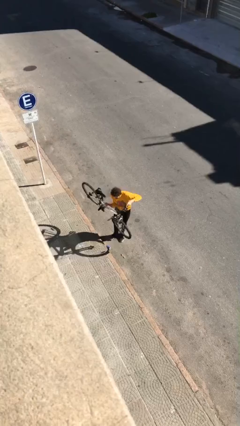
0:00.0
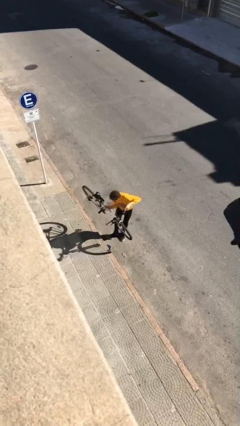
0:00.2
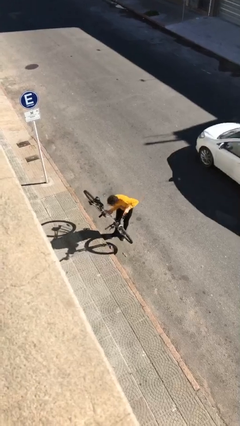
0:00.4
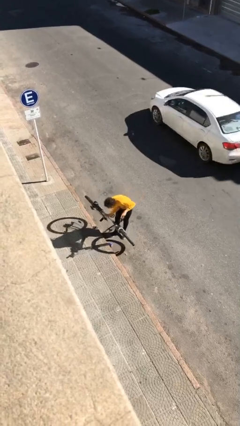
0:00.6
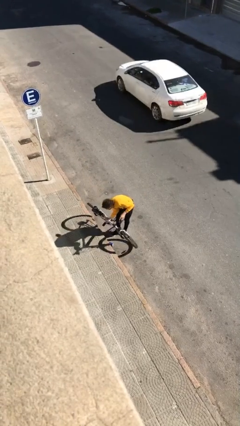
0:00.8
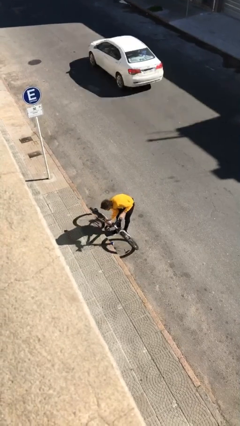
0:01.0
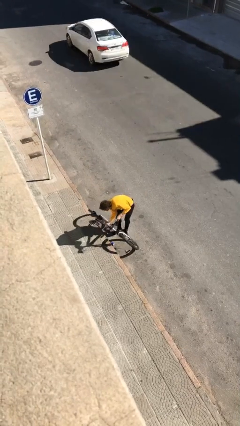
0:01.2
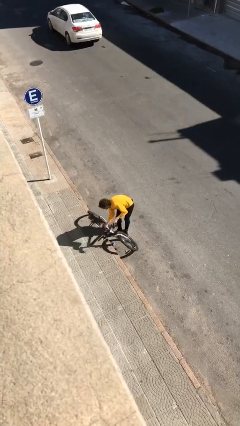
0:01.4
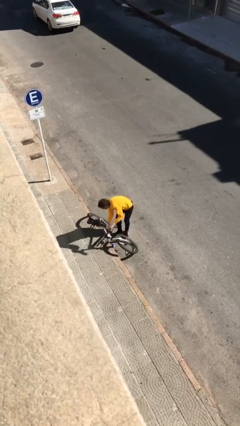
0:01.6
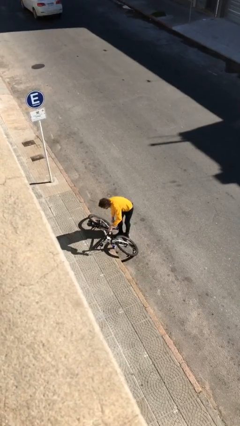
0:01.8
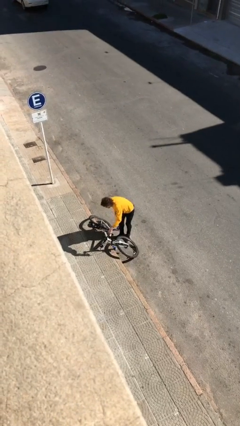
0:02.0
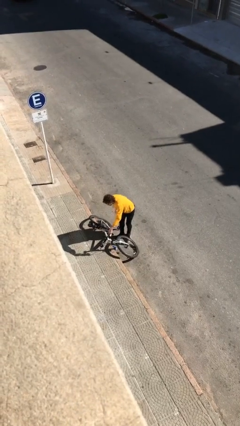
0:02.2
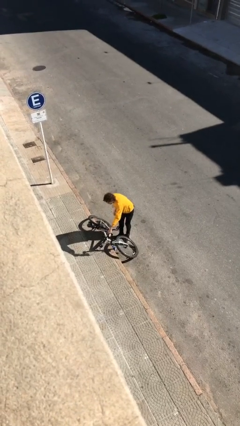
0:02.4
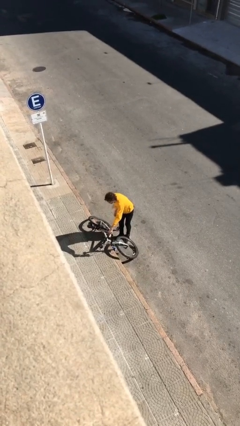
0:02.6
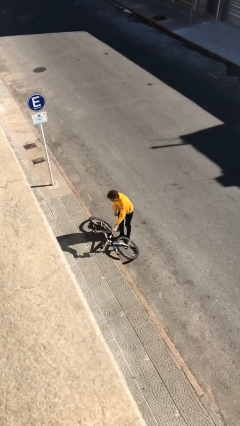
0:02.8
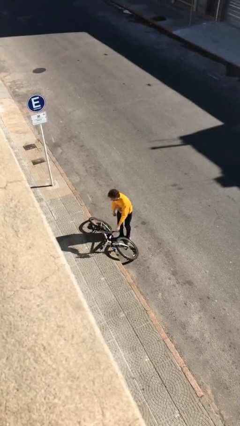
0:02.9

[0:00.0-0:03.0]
person puts down object on floor

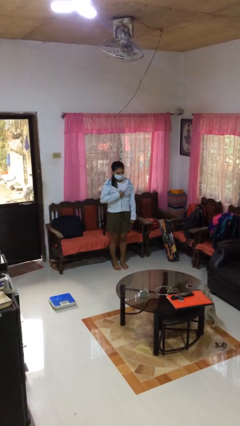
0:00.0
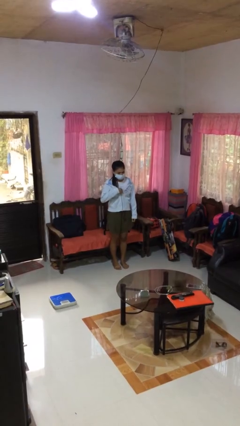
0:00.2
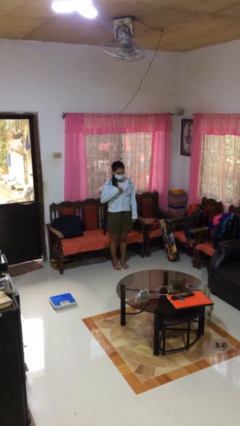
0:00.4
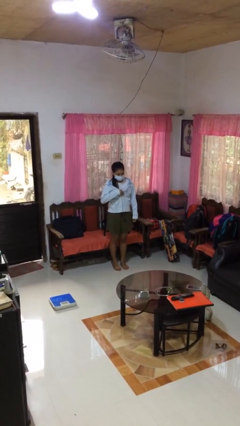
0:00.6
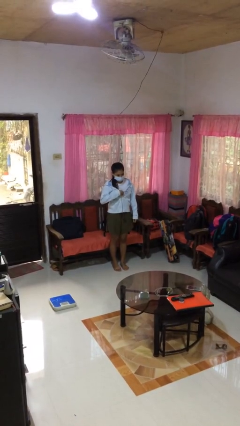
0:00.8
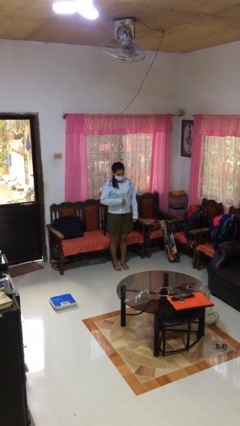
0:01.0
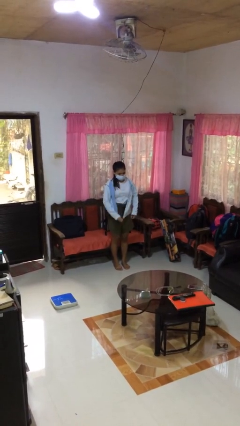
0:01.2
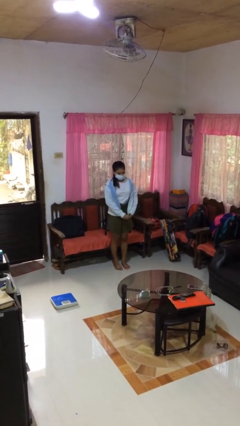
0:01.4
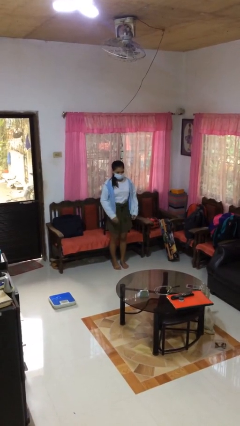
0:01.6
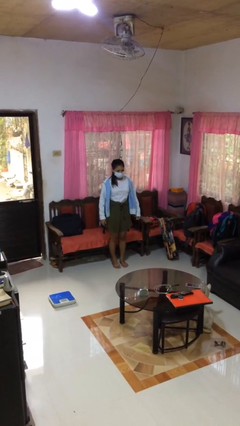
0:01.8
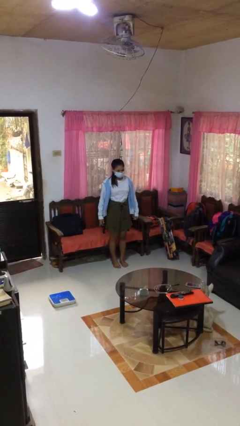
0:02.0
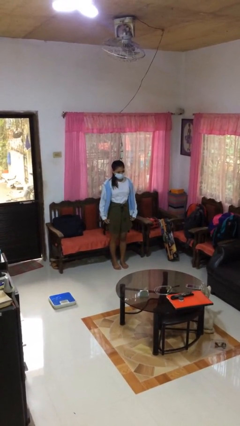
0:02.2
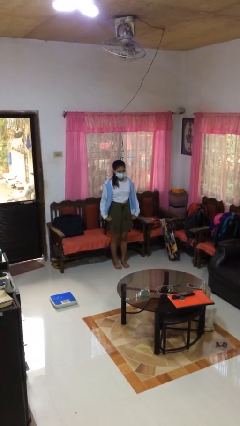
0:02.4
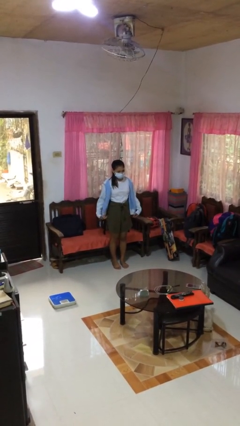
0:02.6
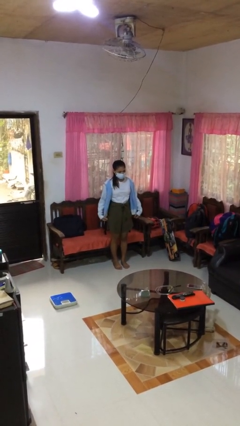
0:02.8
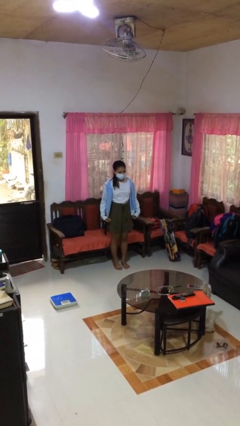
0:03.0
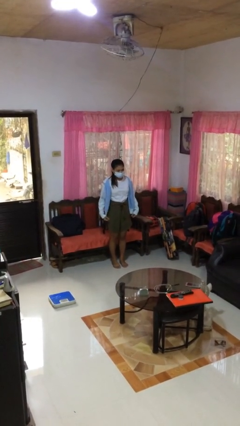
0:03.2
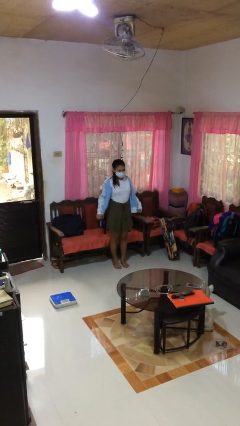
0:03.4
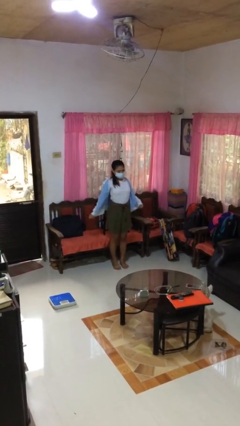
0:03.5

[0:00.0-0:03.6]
person unzips jacket

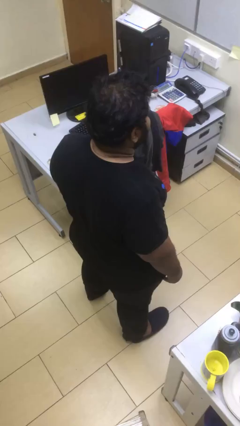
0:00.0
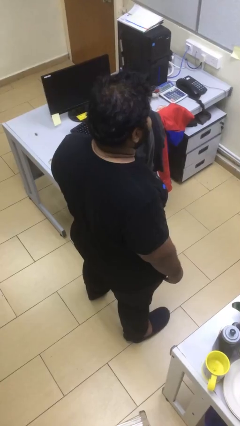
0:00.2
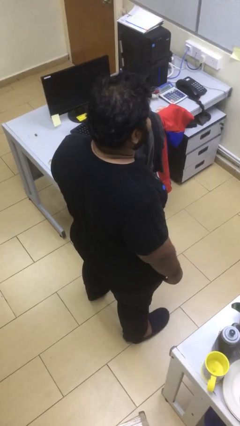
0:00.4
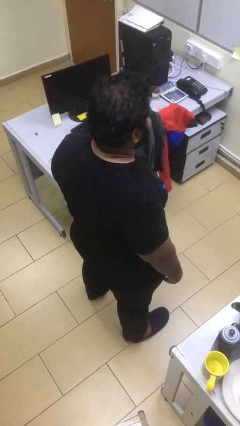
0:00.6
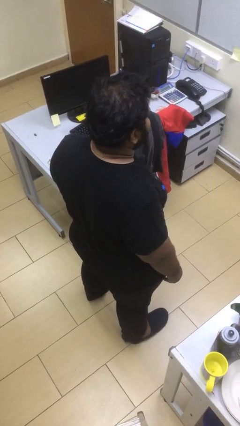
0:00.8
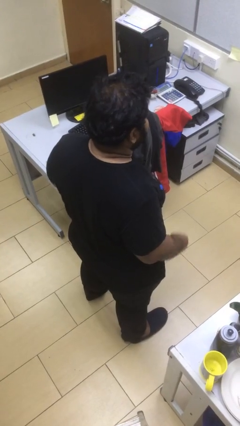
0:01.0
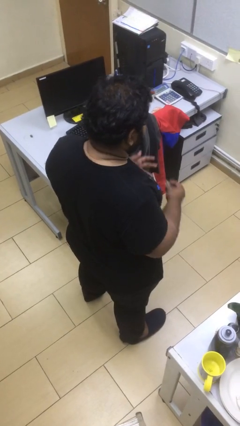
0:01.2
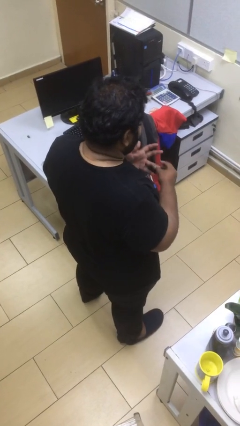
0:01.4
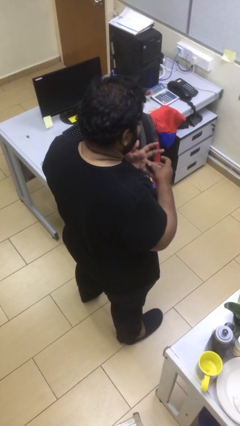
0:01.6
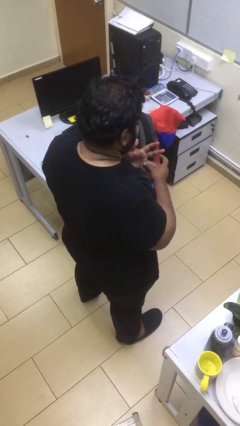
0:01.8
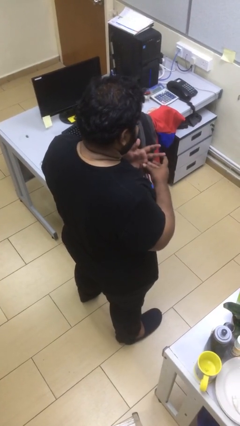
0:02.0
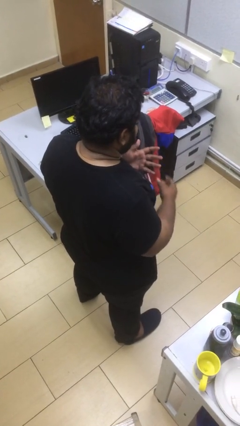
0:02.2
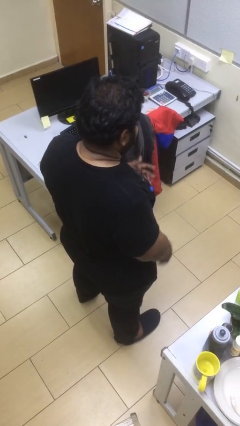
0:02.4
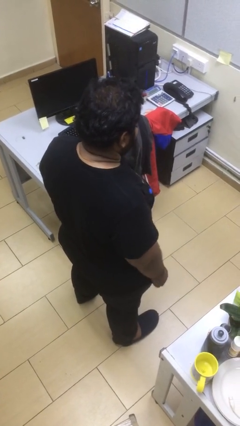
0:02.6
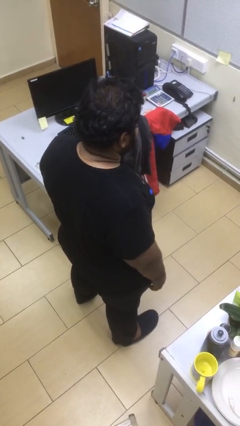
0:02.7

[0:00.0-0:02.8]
person puts on ring

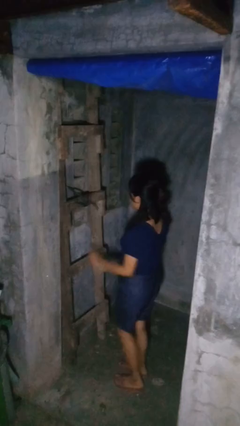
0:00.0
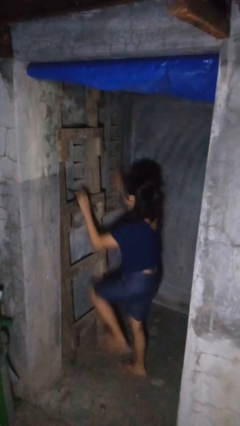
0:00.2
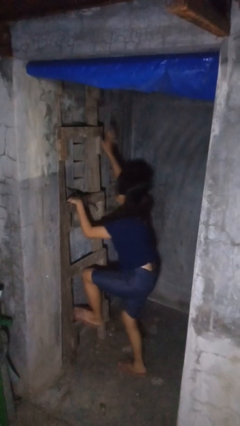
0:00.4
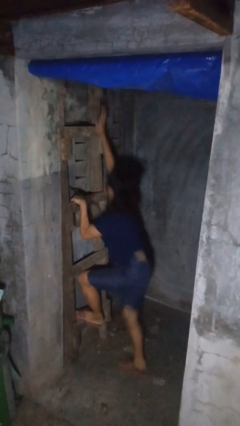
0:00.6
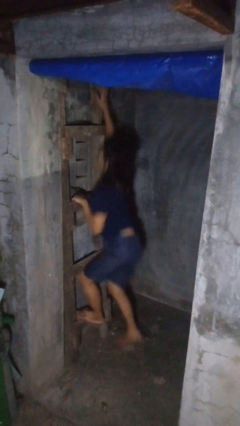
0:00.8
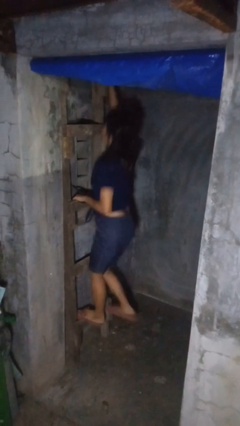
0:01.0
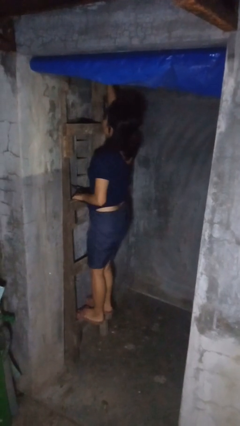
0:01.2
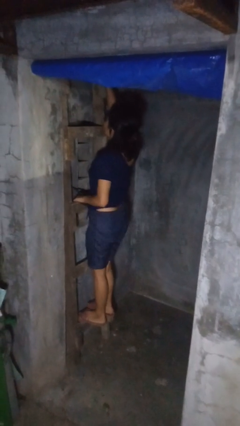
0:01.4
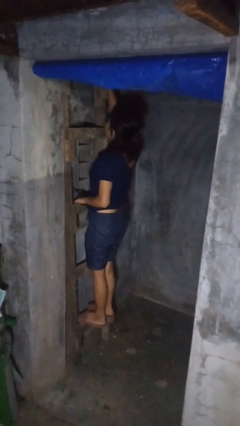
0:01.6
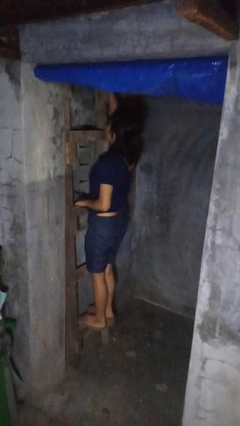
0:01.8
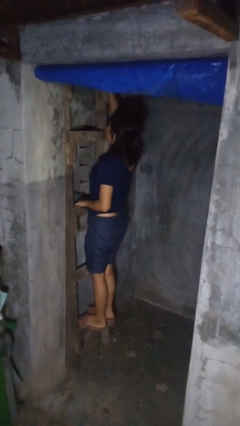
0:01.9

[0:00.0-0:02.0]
person climbs up ladder

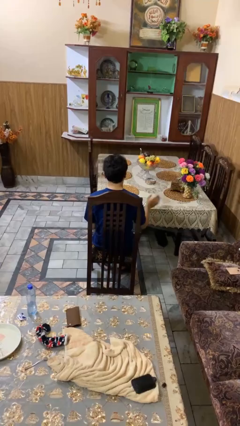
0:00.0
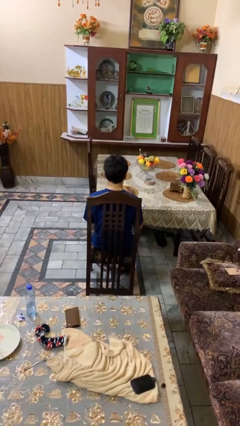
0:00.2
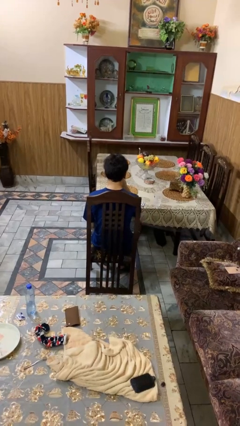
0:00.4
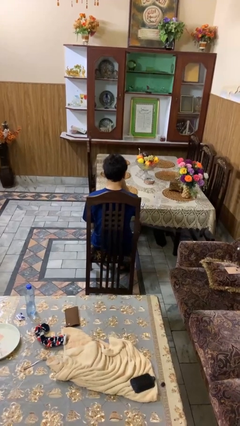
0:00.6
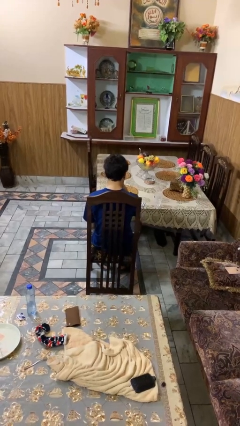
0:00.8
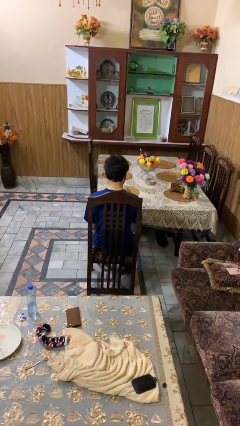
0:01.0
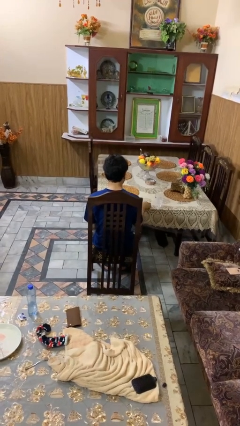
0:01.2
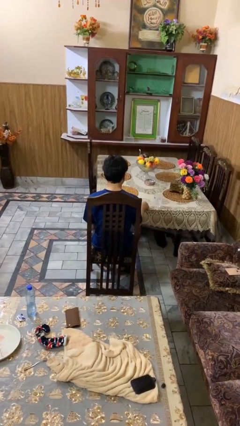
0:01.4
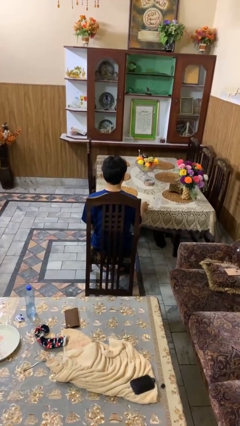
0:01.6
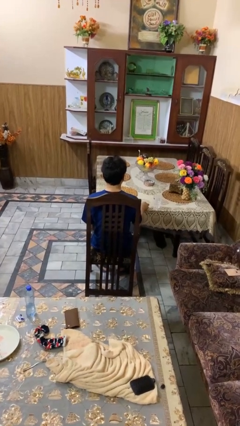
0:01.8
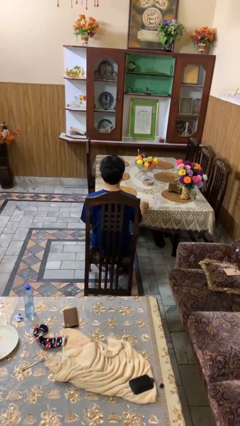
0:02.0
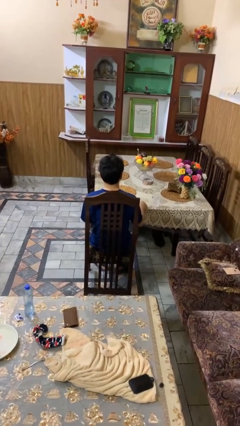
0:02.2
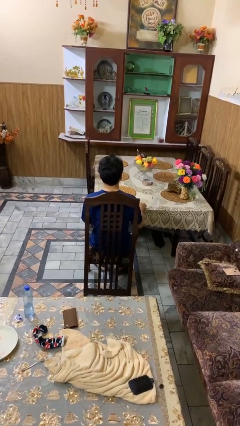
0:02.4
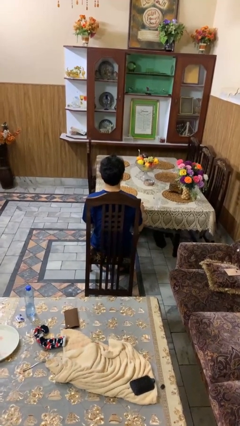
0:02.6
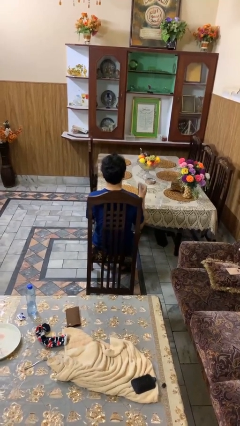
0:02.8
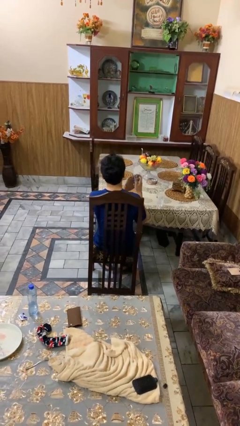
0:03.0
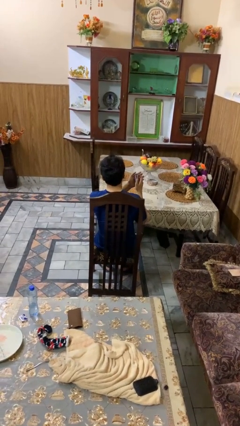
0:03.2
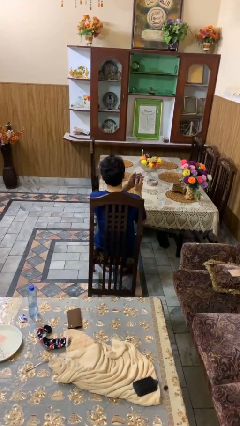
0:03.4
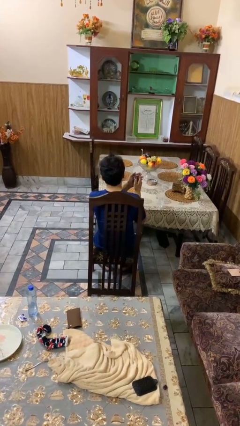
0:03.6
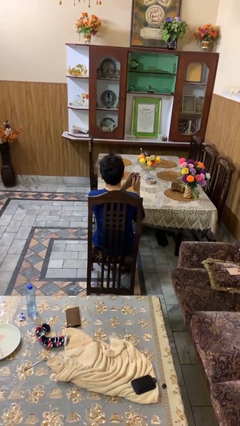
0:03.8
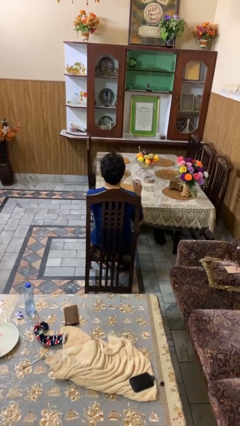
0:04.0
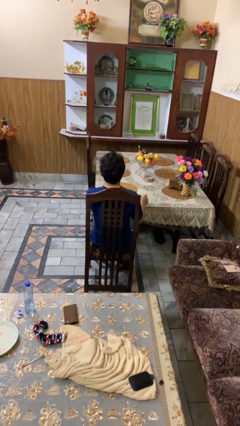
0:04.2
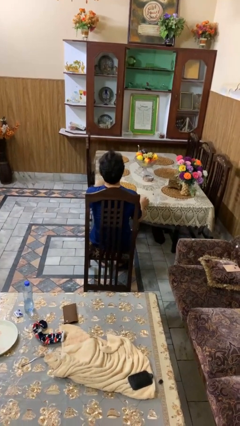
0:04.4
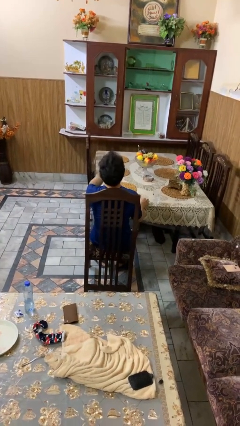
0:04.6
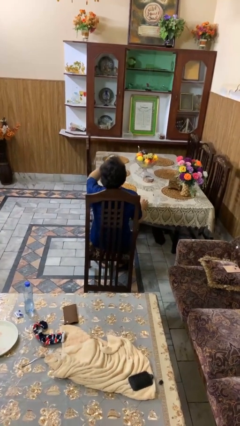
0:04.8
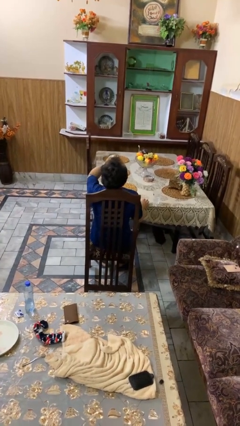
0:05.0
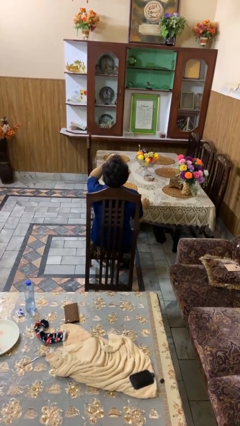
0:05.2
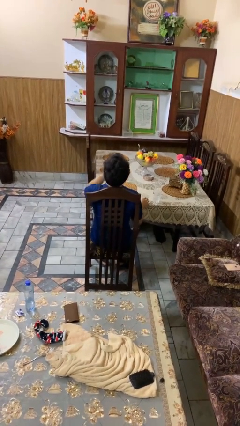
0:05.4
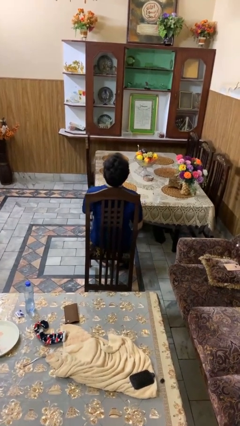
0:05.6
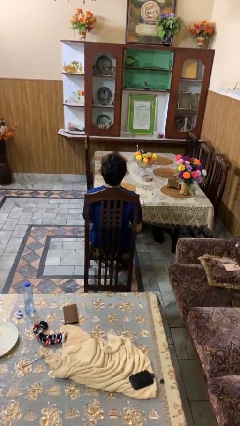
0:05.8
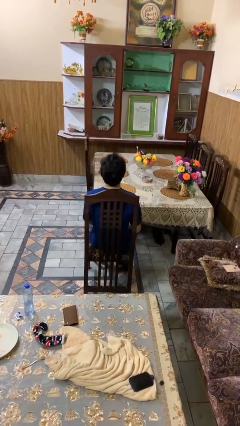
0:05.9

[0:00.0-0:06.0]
person takes medicine pills

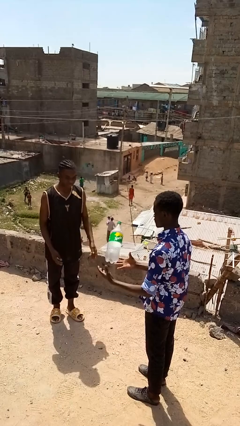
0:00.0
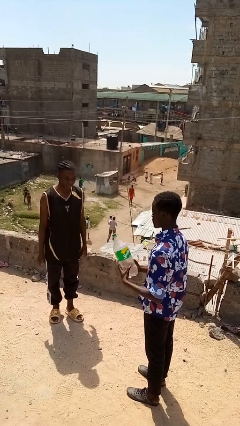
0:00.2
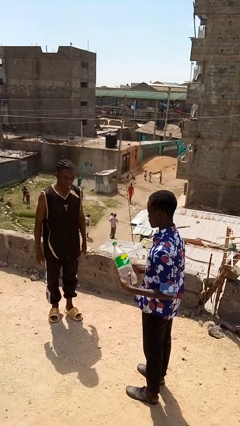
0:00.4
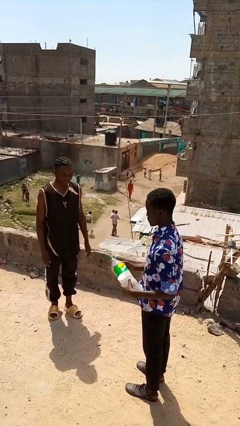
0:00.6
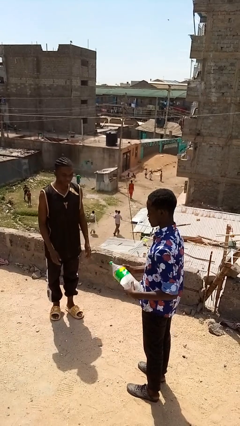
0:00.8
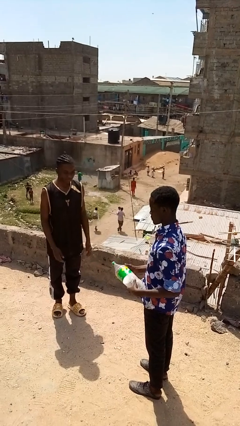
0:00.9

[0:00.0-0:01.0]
person catches object from person
